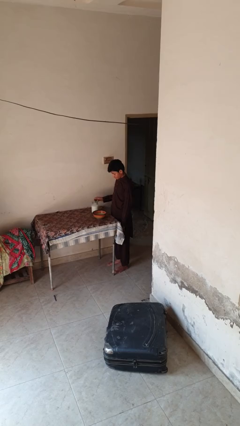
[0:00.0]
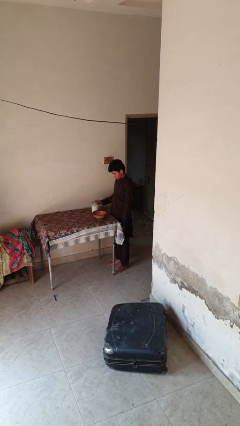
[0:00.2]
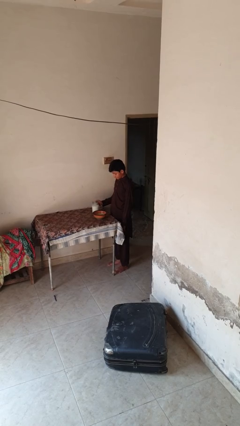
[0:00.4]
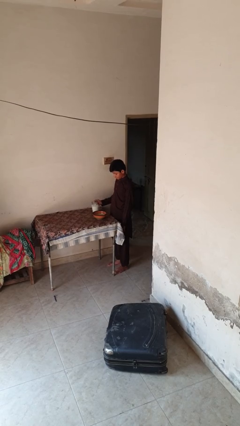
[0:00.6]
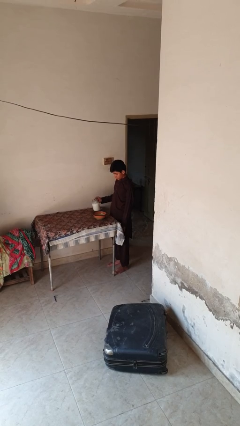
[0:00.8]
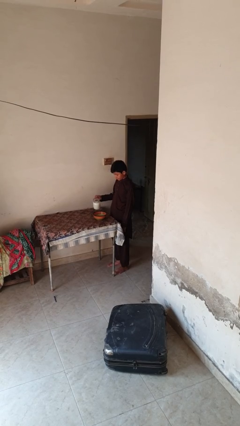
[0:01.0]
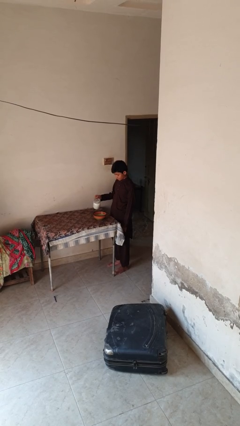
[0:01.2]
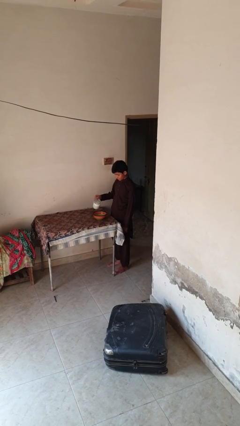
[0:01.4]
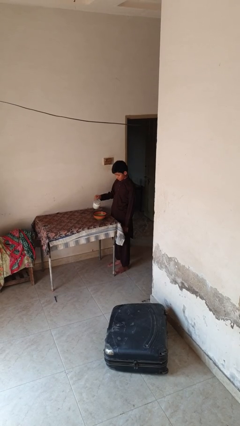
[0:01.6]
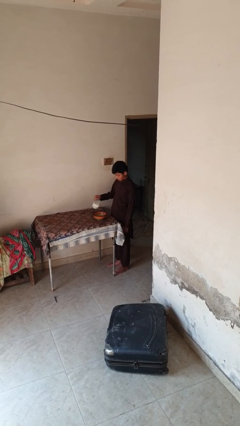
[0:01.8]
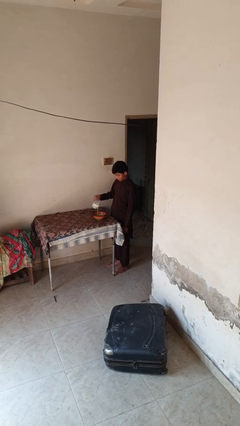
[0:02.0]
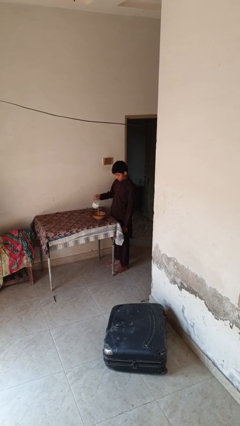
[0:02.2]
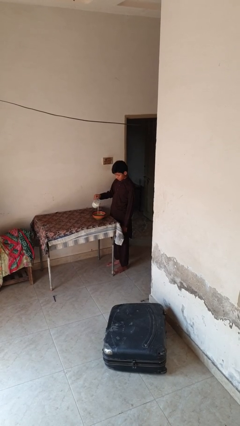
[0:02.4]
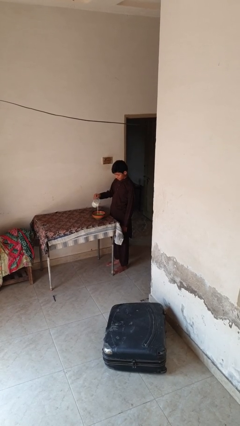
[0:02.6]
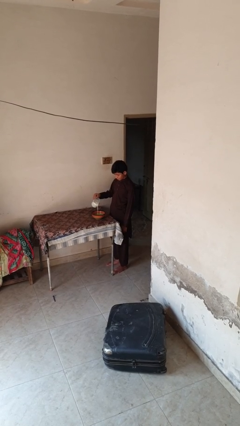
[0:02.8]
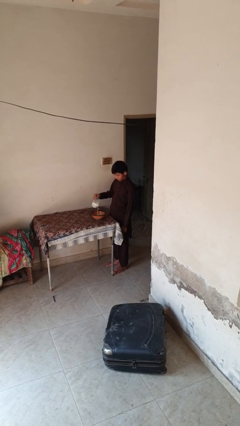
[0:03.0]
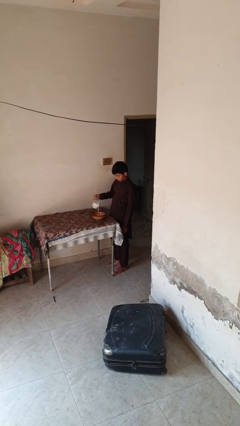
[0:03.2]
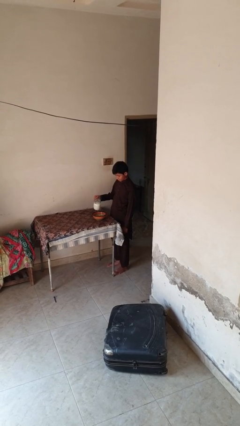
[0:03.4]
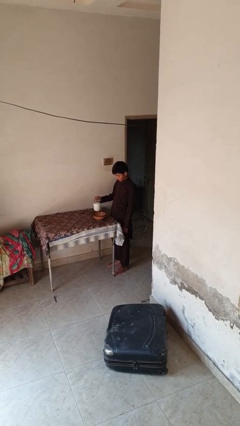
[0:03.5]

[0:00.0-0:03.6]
person pours into bowl

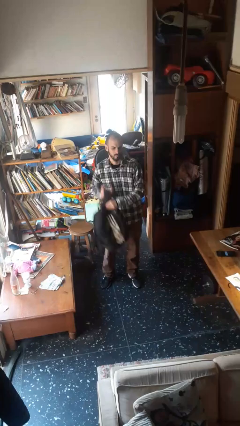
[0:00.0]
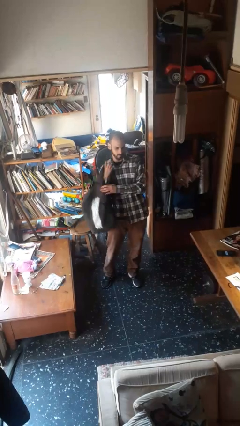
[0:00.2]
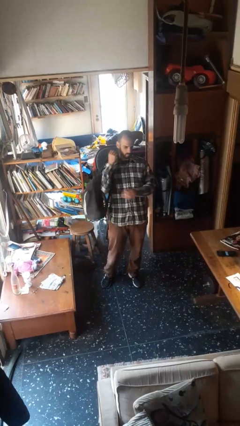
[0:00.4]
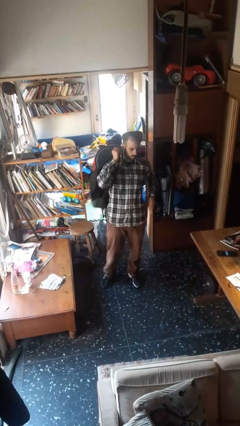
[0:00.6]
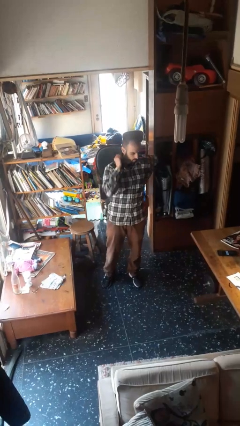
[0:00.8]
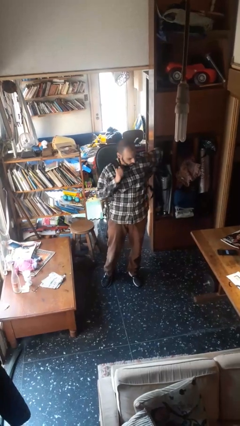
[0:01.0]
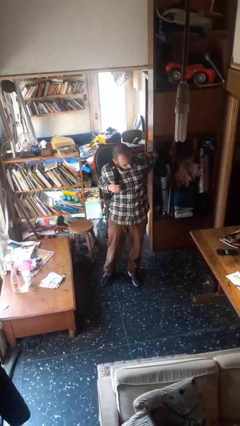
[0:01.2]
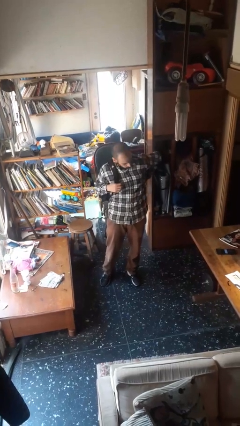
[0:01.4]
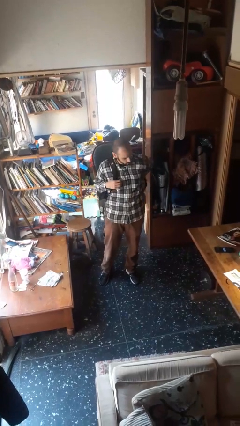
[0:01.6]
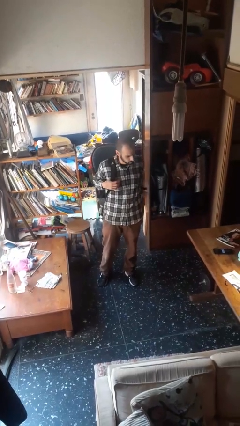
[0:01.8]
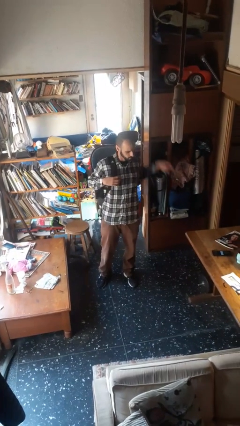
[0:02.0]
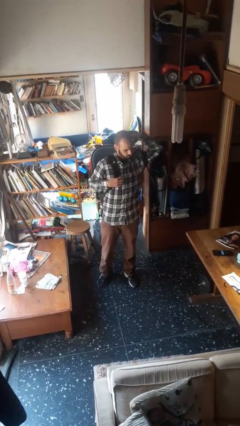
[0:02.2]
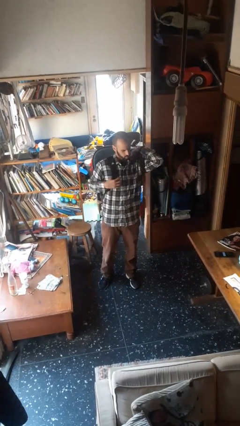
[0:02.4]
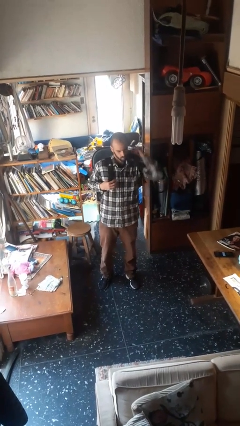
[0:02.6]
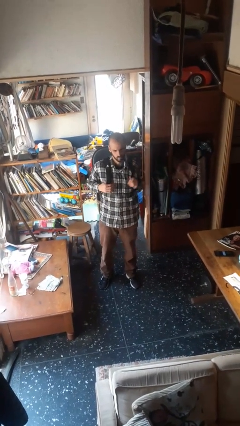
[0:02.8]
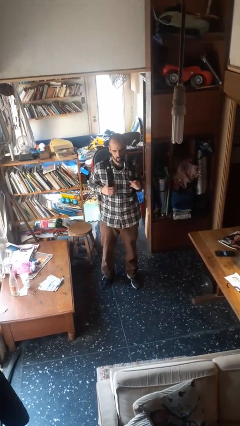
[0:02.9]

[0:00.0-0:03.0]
person puts on backpack

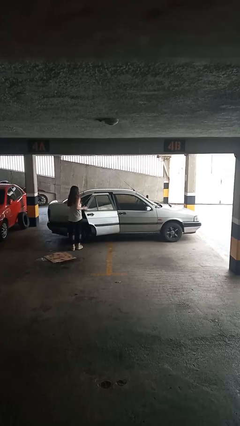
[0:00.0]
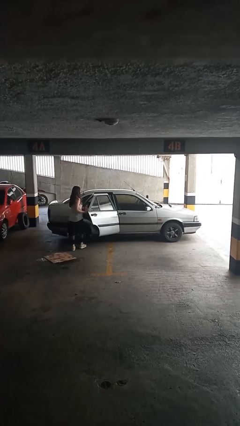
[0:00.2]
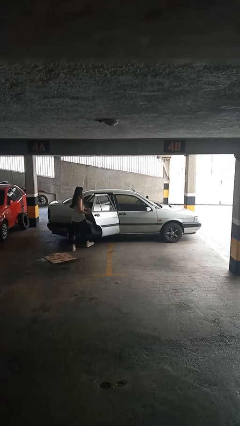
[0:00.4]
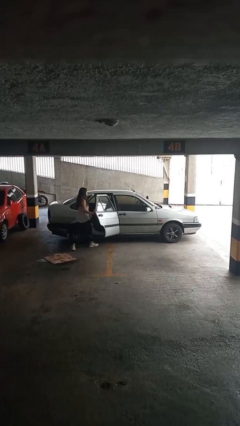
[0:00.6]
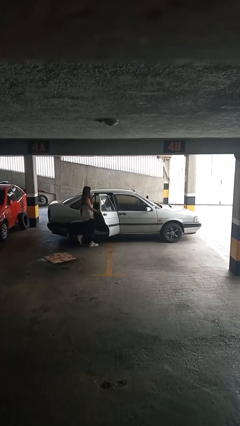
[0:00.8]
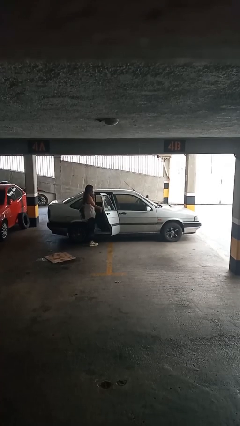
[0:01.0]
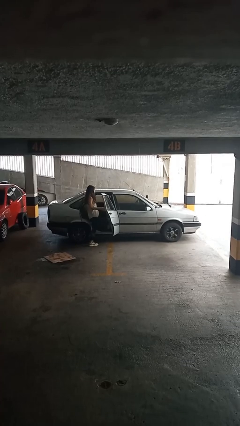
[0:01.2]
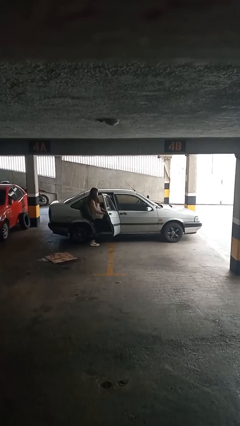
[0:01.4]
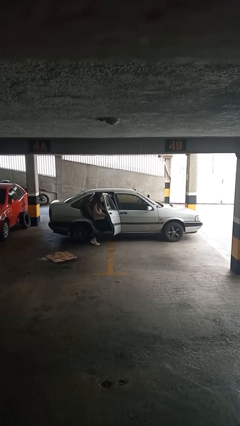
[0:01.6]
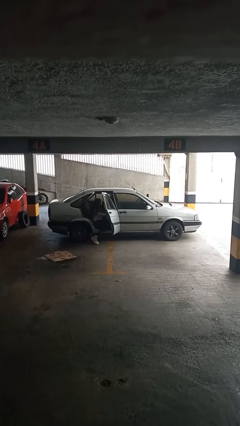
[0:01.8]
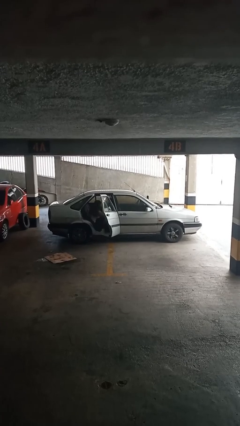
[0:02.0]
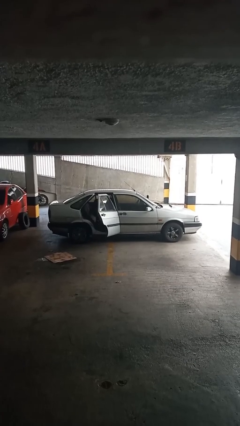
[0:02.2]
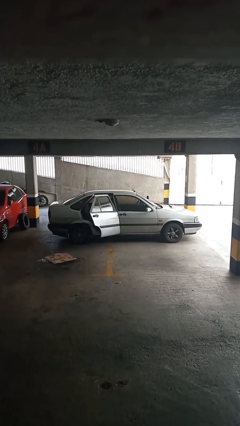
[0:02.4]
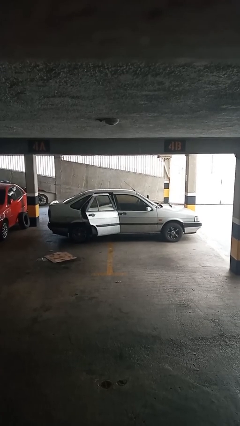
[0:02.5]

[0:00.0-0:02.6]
car picks up person

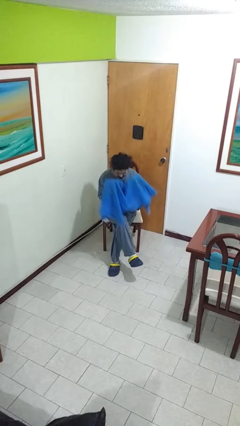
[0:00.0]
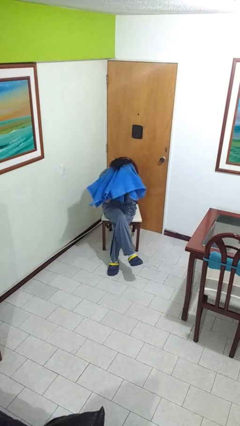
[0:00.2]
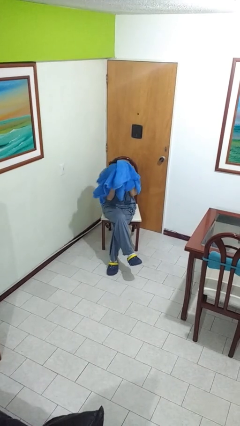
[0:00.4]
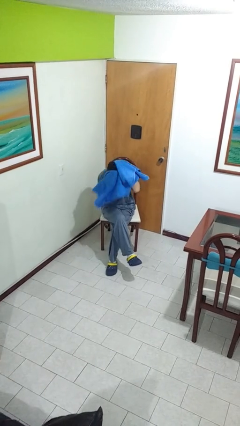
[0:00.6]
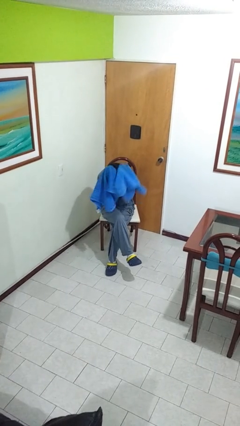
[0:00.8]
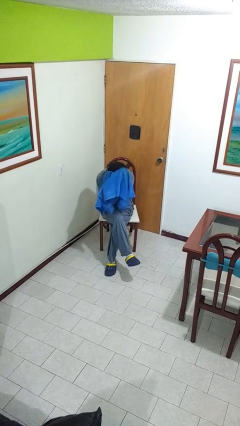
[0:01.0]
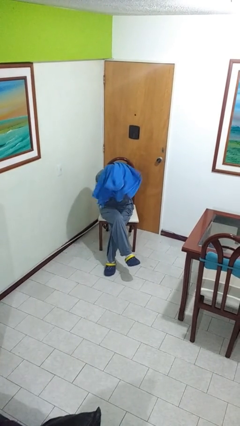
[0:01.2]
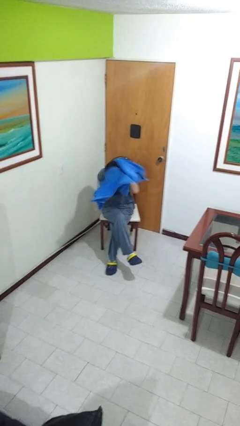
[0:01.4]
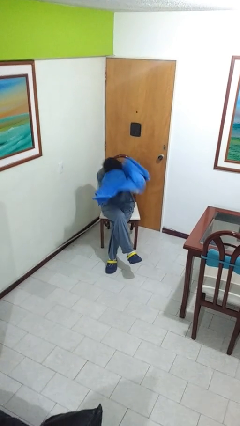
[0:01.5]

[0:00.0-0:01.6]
person dries hair with towel

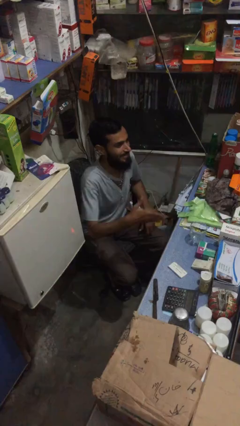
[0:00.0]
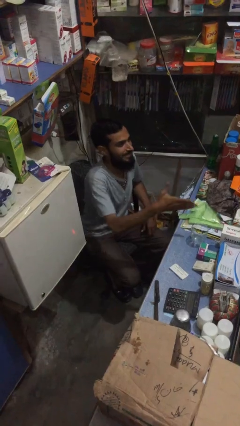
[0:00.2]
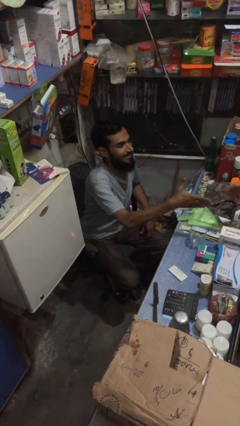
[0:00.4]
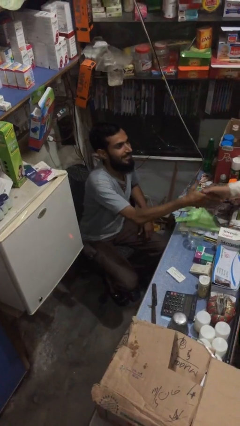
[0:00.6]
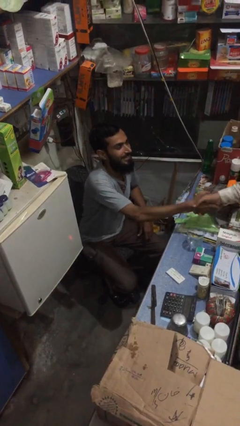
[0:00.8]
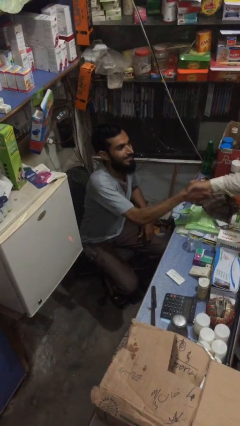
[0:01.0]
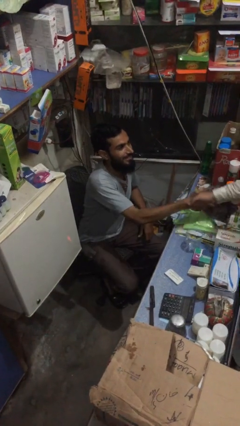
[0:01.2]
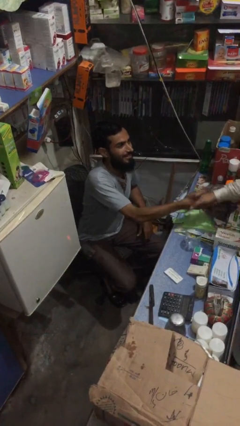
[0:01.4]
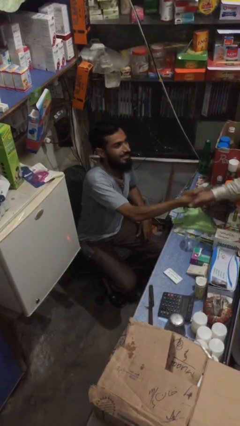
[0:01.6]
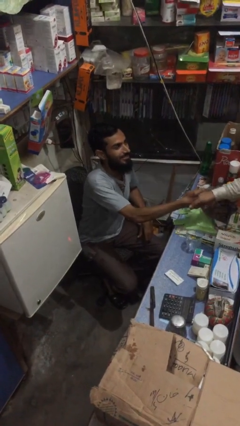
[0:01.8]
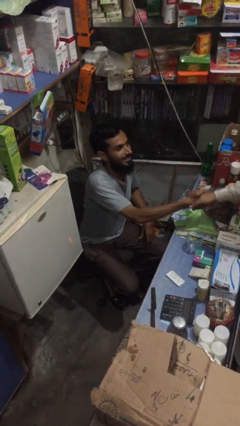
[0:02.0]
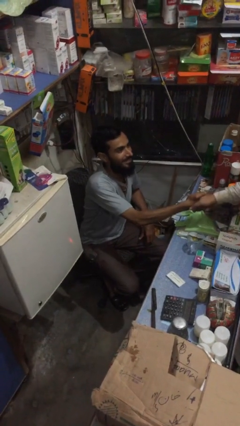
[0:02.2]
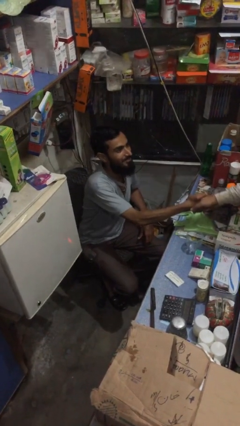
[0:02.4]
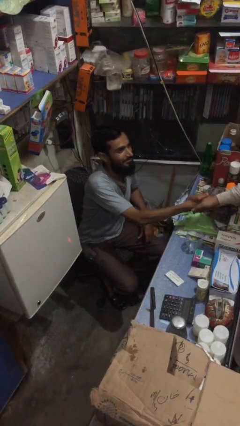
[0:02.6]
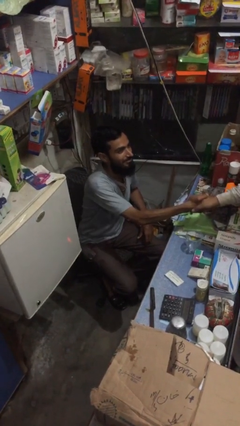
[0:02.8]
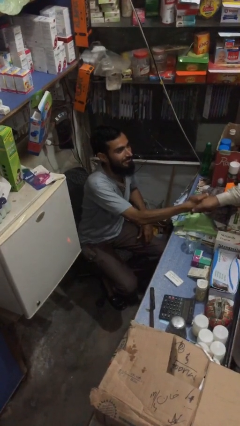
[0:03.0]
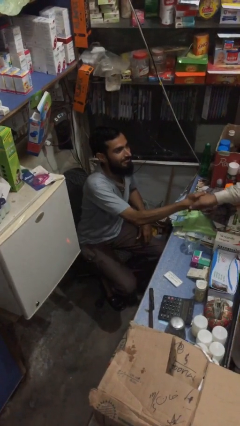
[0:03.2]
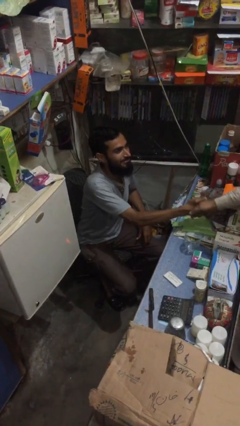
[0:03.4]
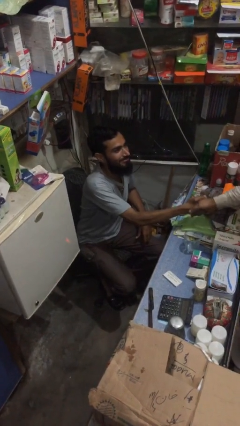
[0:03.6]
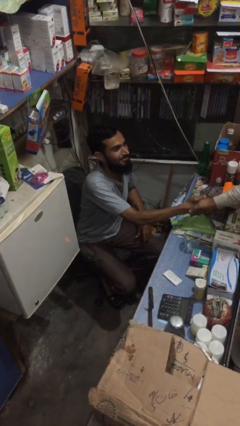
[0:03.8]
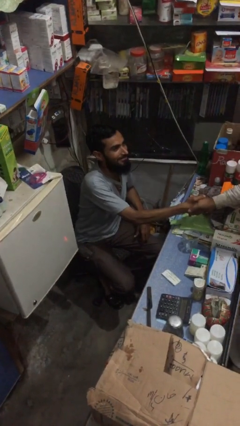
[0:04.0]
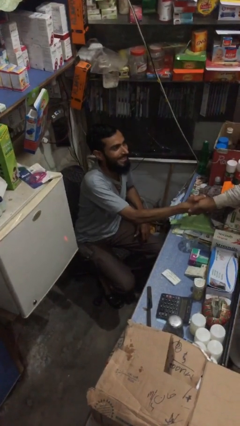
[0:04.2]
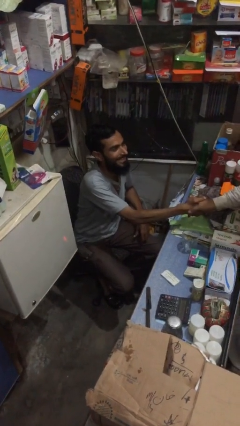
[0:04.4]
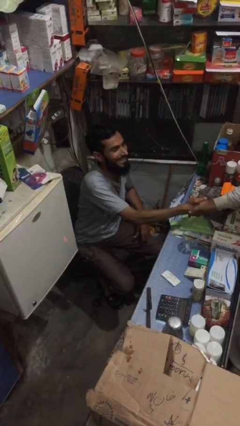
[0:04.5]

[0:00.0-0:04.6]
person shakes hand

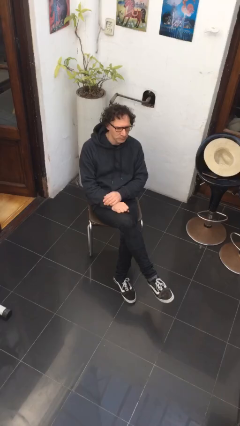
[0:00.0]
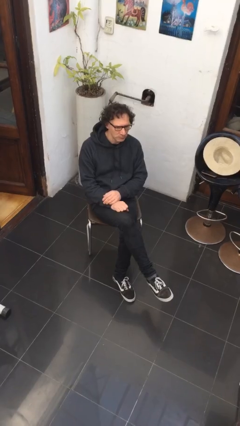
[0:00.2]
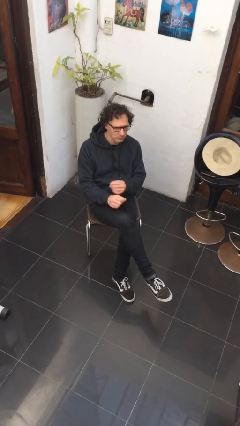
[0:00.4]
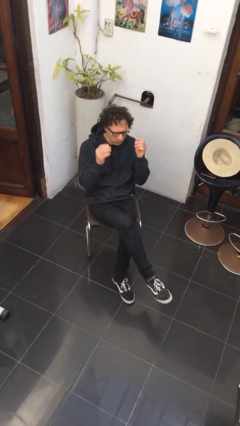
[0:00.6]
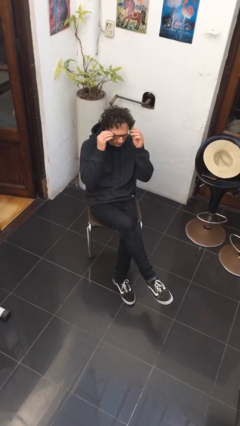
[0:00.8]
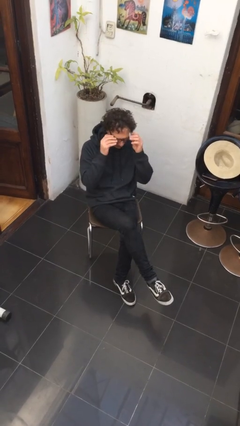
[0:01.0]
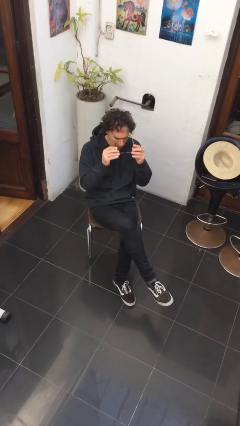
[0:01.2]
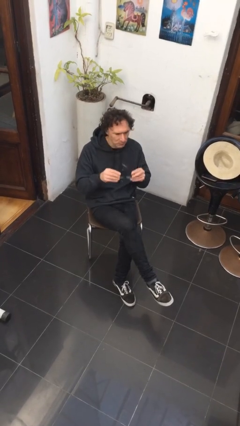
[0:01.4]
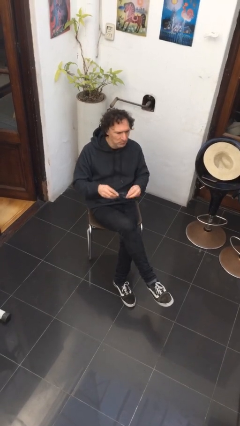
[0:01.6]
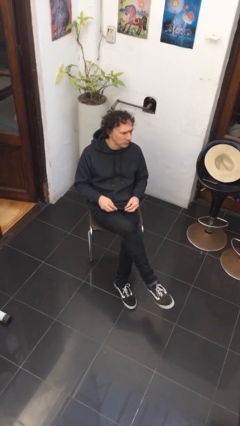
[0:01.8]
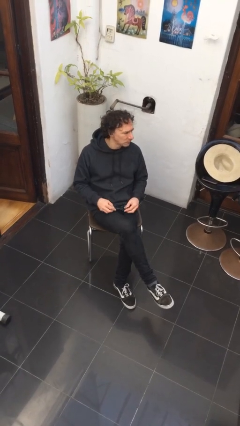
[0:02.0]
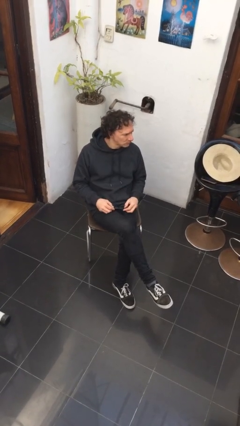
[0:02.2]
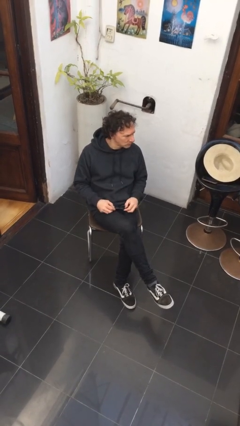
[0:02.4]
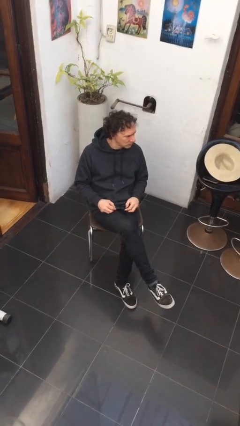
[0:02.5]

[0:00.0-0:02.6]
person takes off glasses
